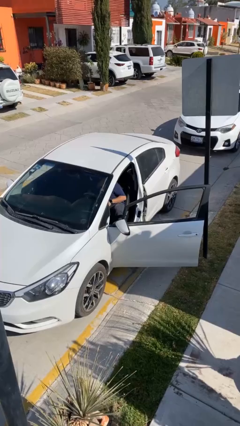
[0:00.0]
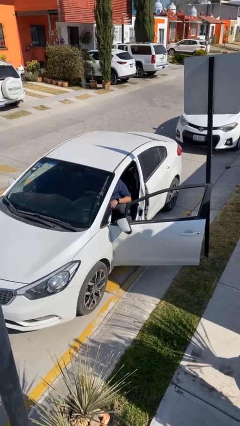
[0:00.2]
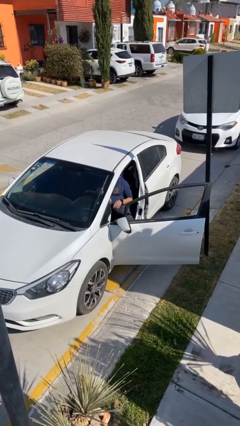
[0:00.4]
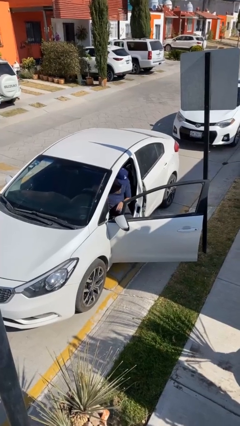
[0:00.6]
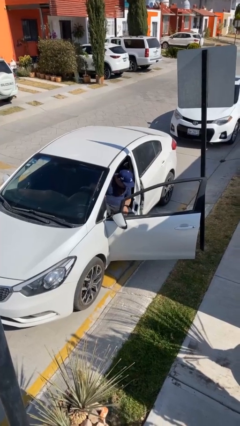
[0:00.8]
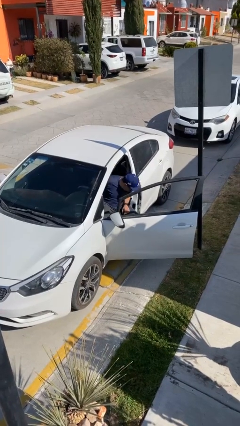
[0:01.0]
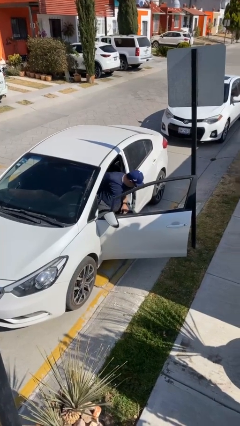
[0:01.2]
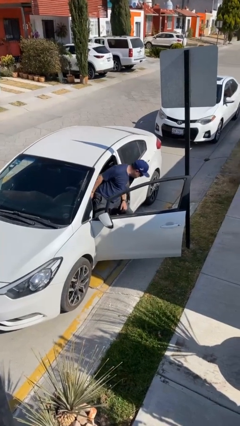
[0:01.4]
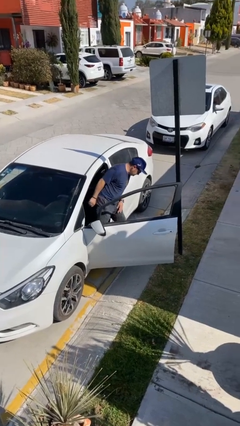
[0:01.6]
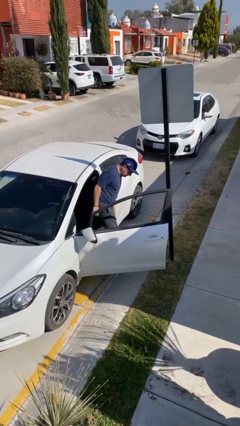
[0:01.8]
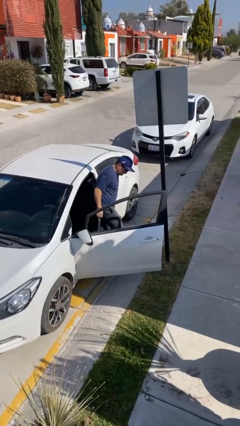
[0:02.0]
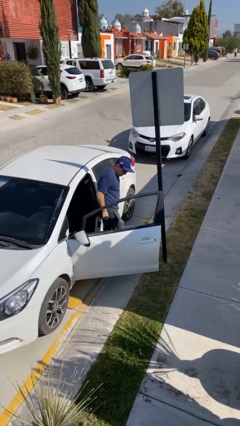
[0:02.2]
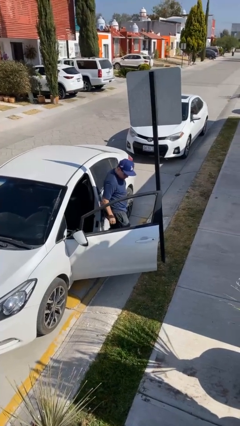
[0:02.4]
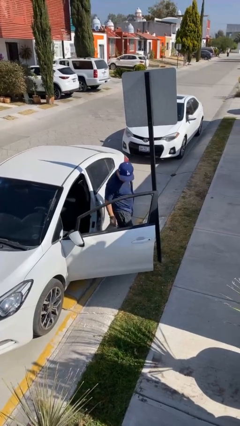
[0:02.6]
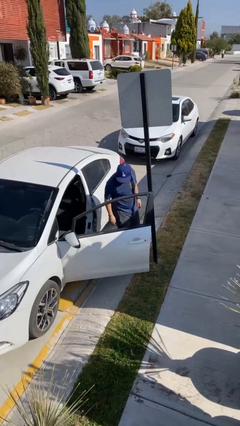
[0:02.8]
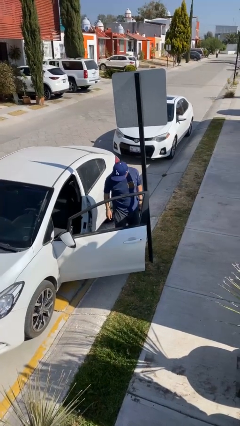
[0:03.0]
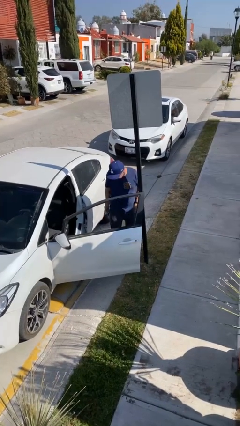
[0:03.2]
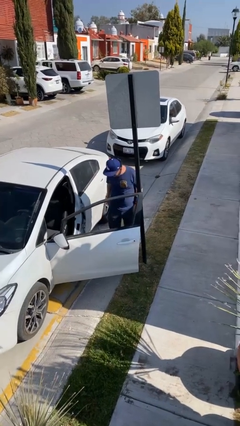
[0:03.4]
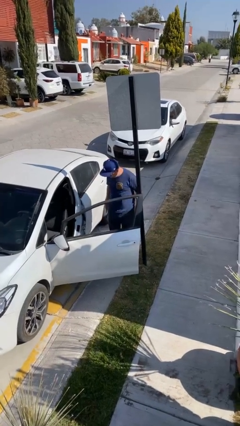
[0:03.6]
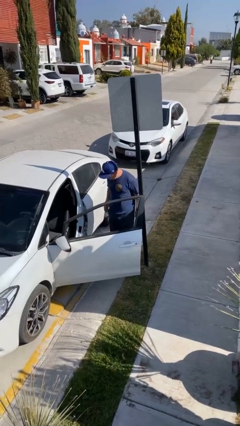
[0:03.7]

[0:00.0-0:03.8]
person exits car

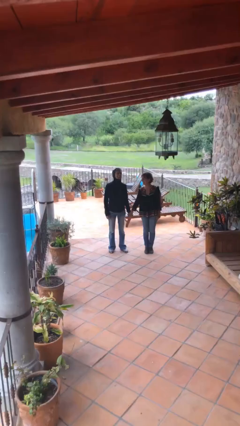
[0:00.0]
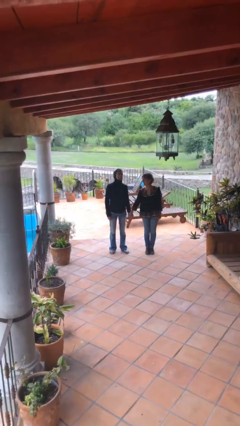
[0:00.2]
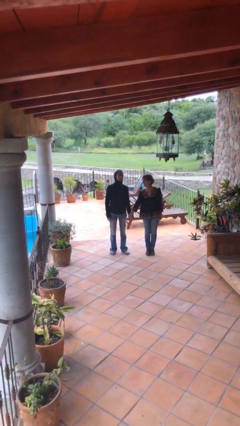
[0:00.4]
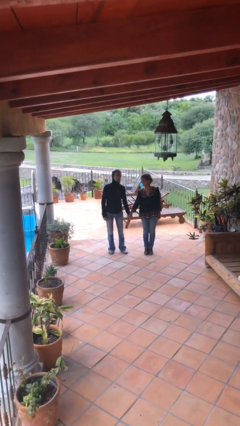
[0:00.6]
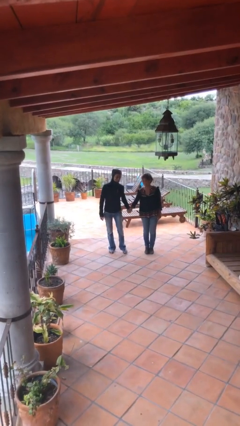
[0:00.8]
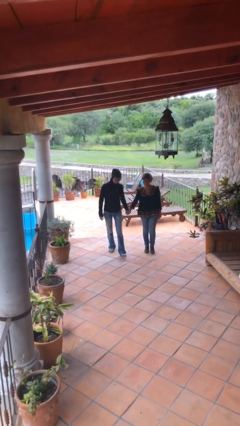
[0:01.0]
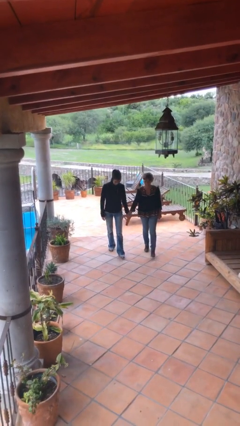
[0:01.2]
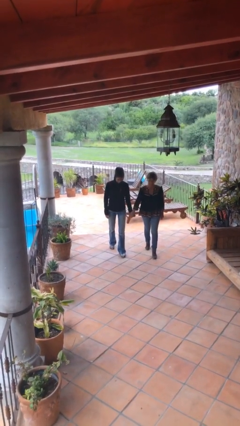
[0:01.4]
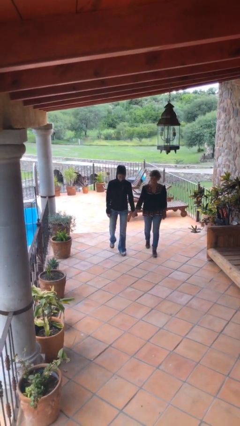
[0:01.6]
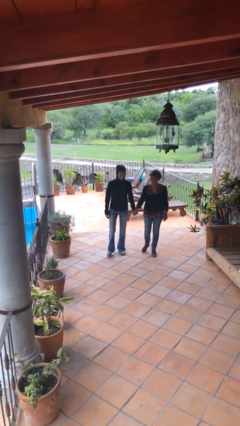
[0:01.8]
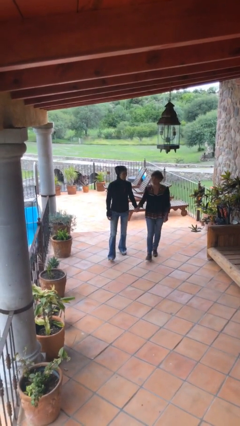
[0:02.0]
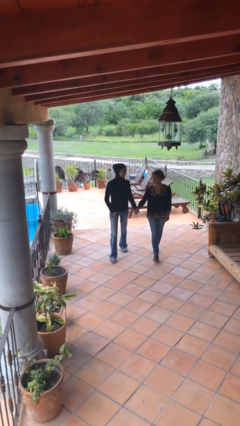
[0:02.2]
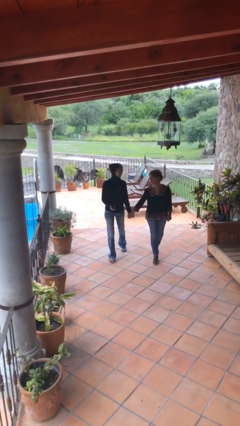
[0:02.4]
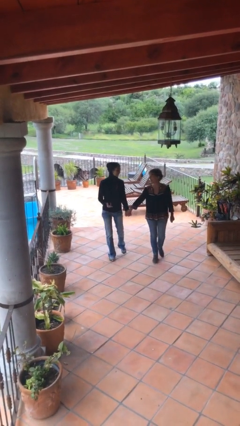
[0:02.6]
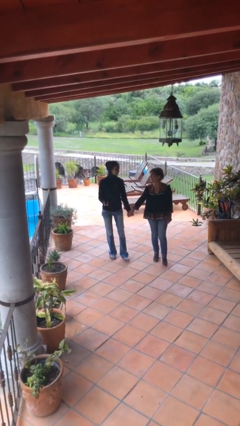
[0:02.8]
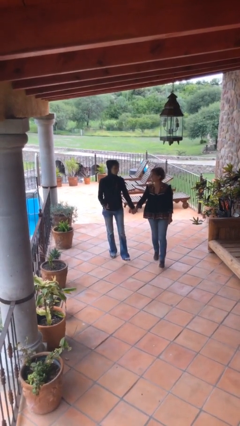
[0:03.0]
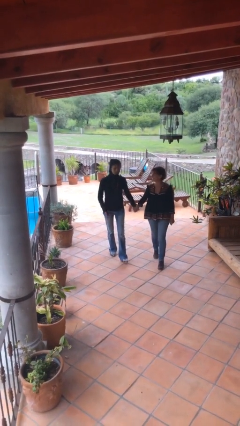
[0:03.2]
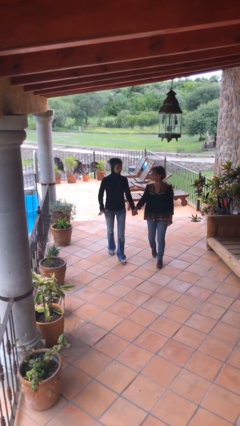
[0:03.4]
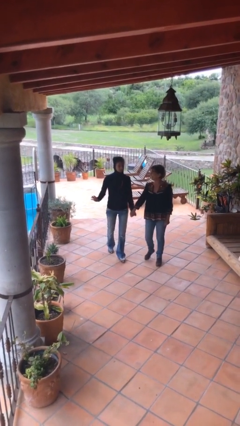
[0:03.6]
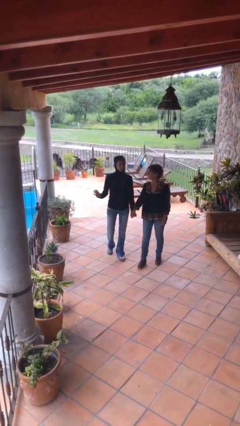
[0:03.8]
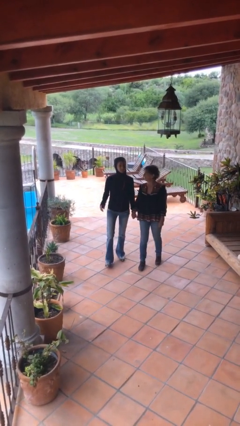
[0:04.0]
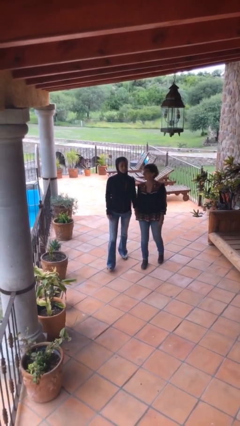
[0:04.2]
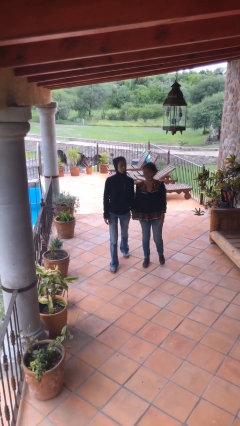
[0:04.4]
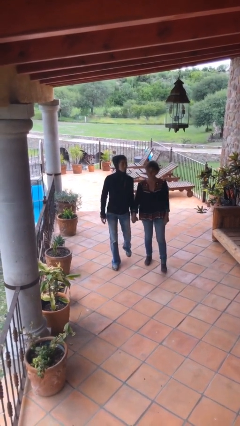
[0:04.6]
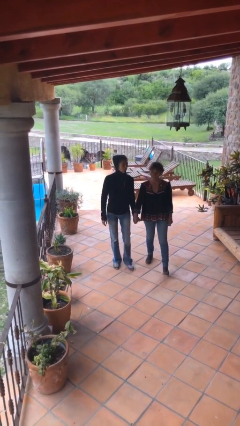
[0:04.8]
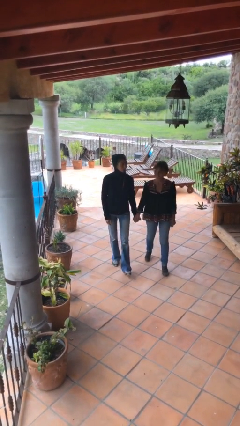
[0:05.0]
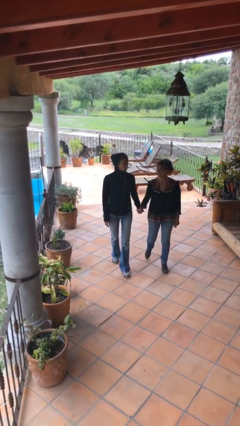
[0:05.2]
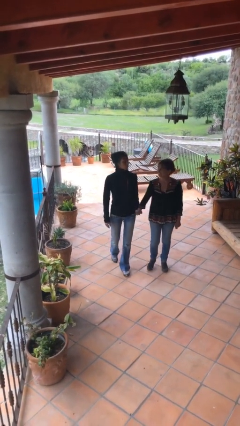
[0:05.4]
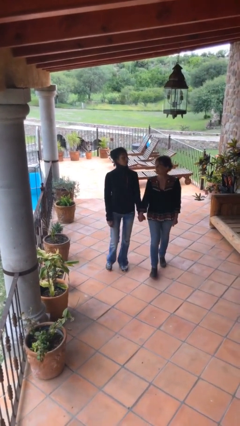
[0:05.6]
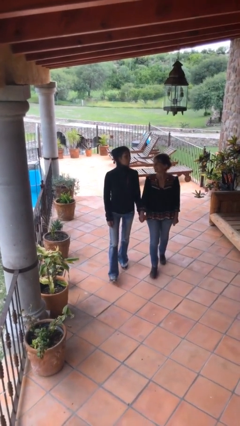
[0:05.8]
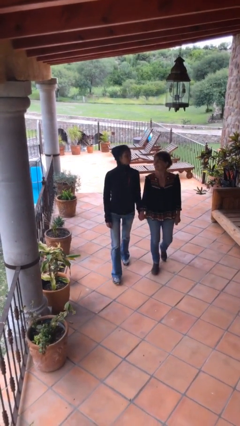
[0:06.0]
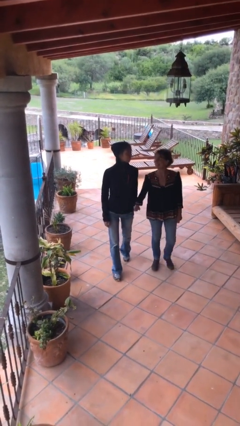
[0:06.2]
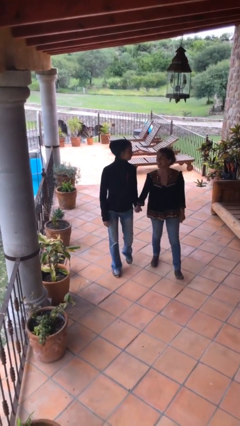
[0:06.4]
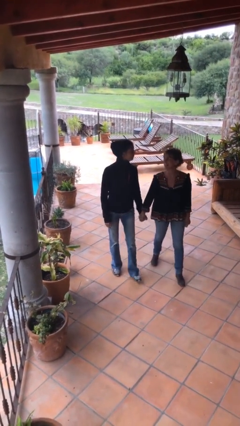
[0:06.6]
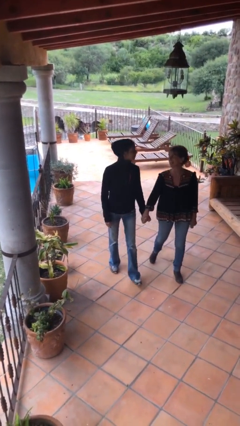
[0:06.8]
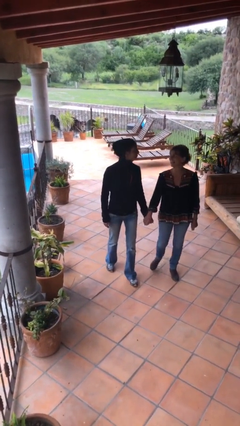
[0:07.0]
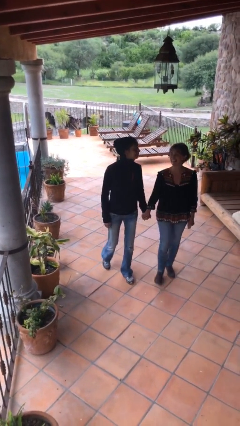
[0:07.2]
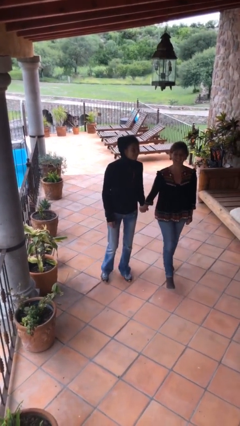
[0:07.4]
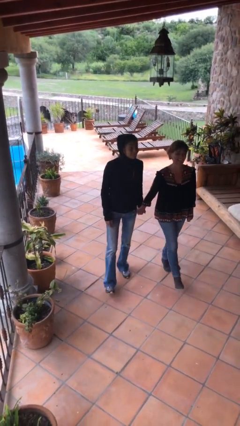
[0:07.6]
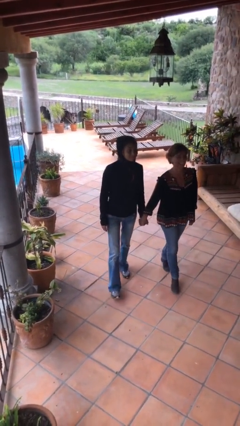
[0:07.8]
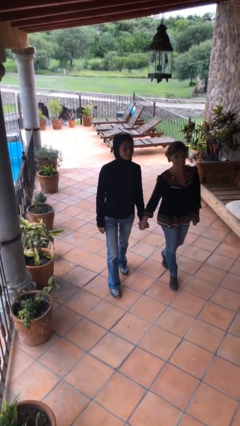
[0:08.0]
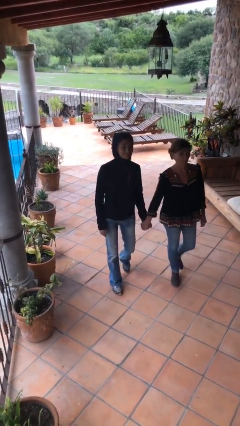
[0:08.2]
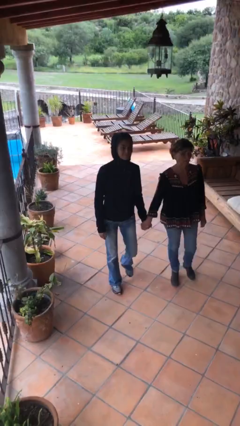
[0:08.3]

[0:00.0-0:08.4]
person holds hand

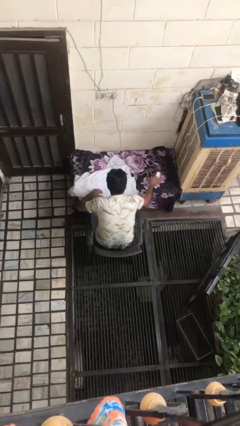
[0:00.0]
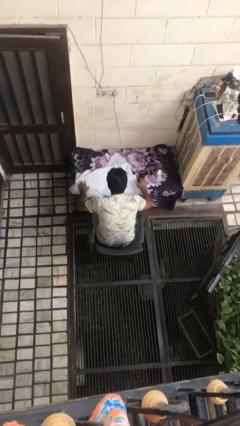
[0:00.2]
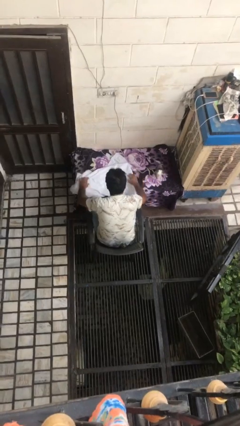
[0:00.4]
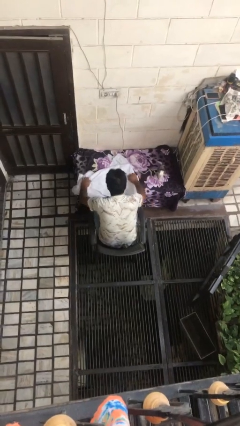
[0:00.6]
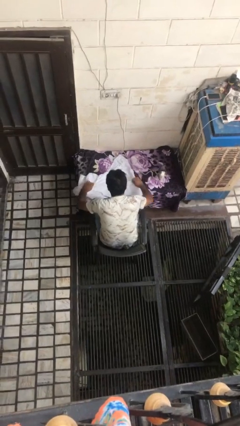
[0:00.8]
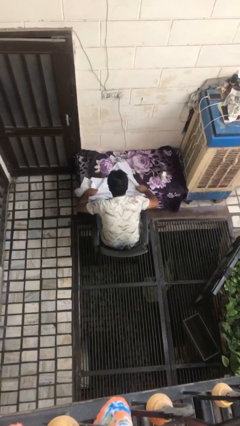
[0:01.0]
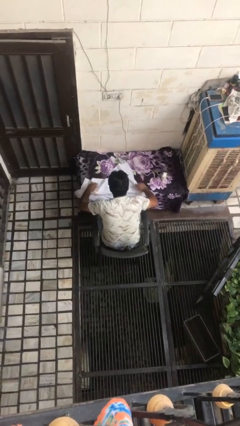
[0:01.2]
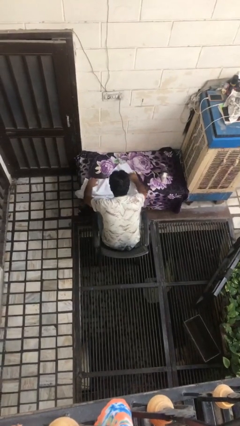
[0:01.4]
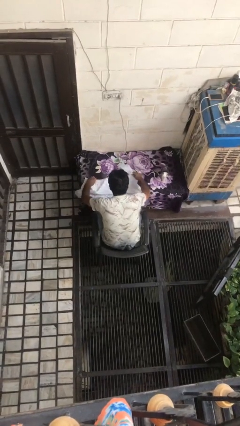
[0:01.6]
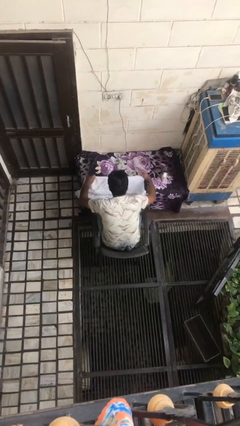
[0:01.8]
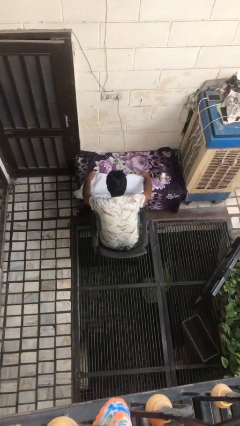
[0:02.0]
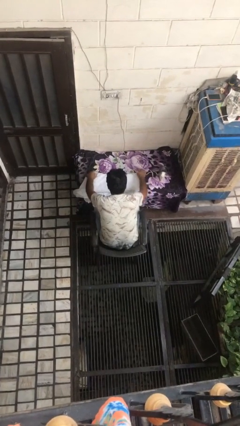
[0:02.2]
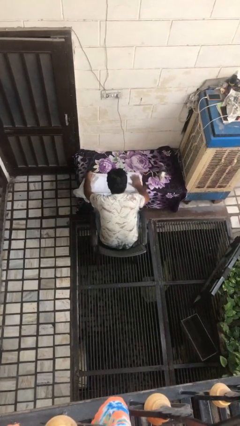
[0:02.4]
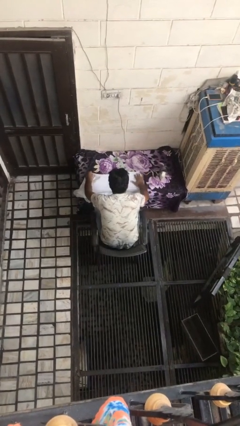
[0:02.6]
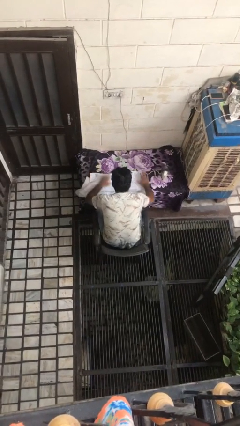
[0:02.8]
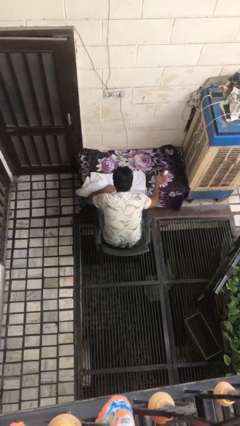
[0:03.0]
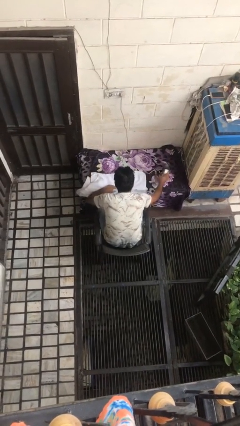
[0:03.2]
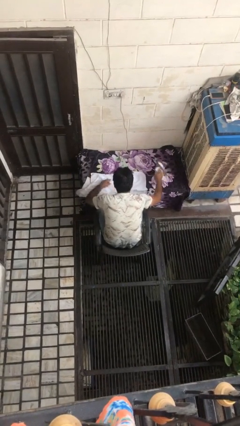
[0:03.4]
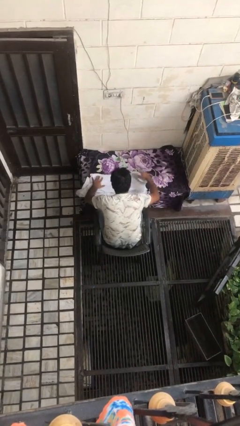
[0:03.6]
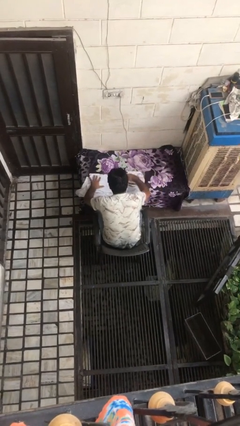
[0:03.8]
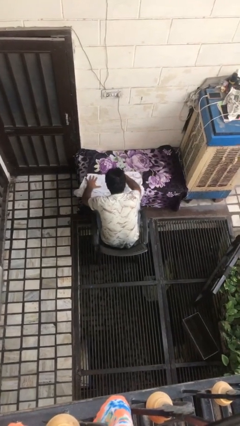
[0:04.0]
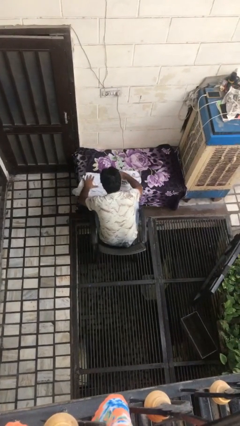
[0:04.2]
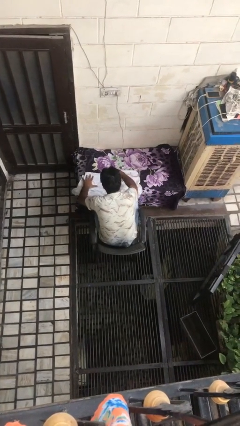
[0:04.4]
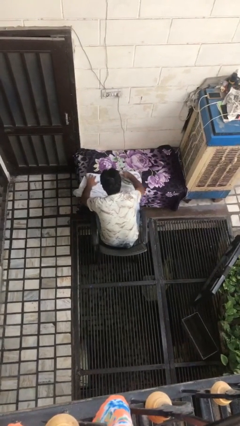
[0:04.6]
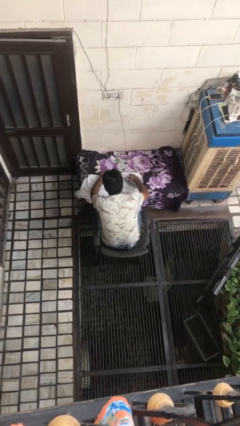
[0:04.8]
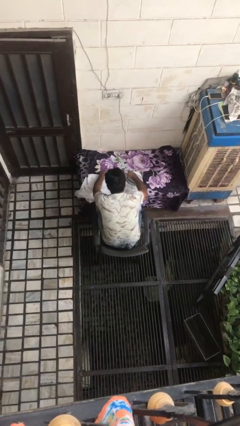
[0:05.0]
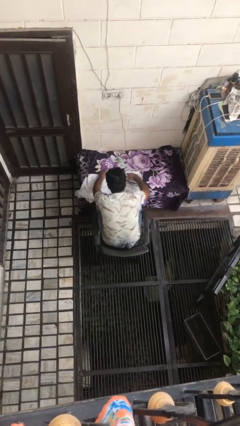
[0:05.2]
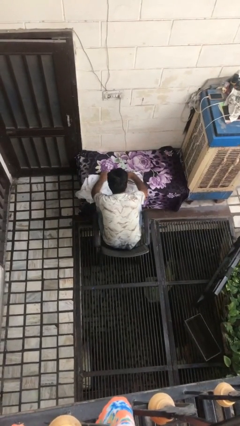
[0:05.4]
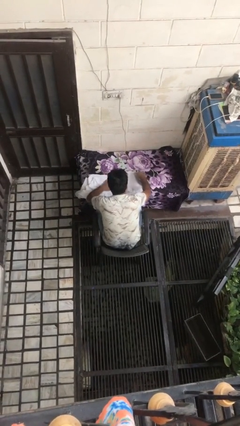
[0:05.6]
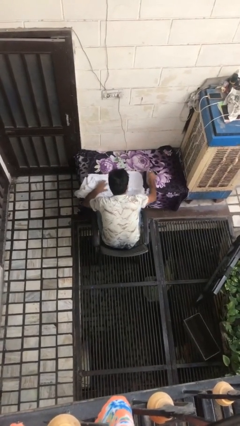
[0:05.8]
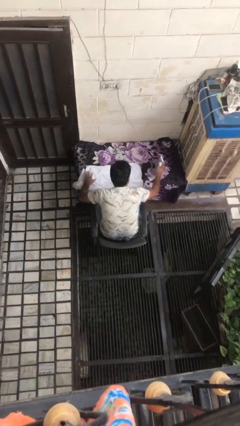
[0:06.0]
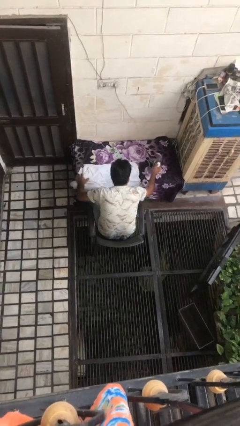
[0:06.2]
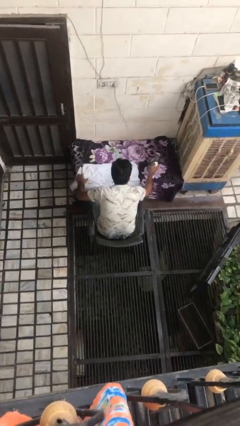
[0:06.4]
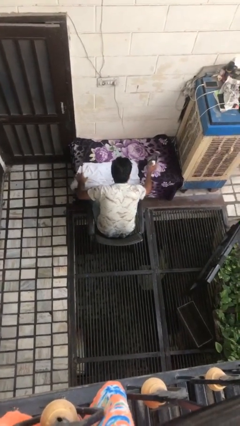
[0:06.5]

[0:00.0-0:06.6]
person irons clothes
